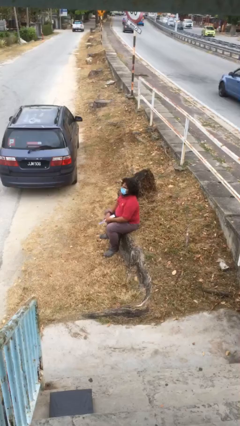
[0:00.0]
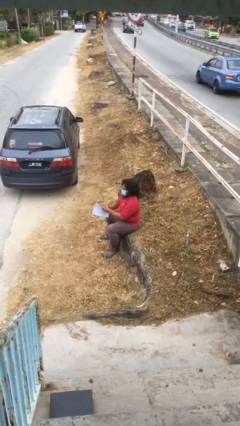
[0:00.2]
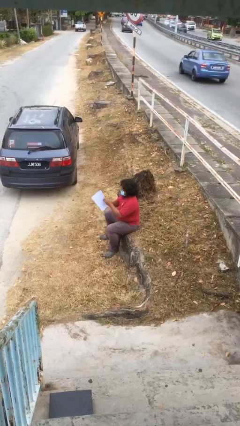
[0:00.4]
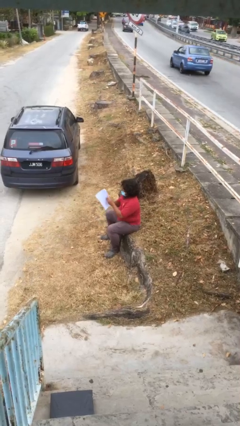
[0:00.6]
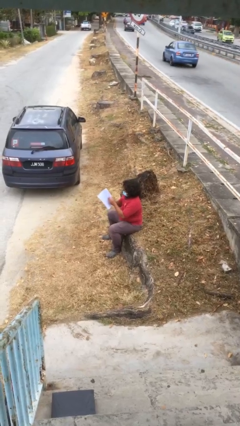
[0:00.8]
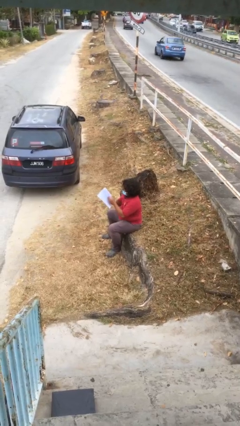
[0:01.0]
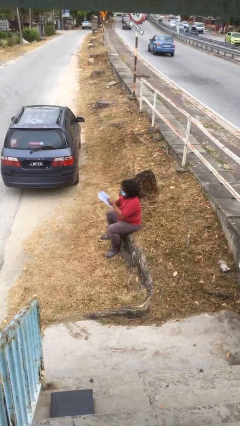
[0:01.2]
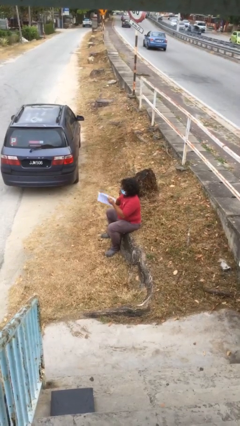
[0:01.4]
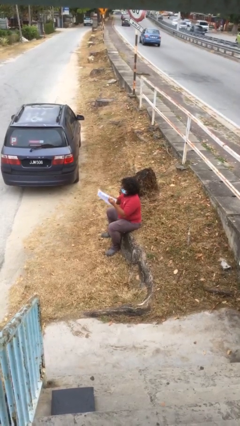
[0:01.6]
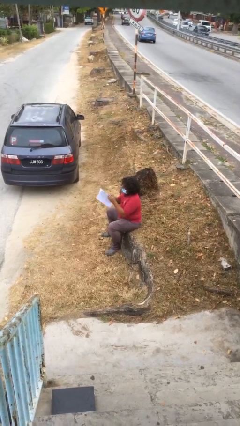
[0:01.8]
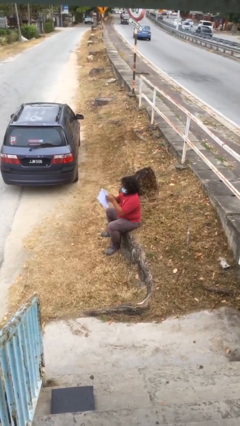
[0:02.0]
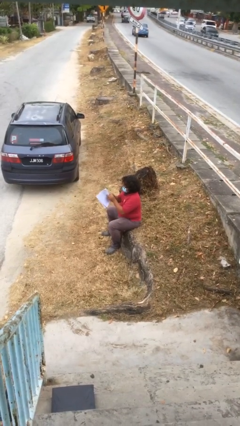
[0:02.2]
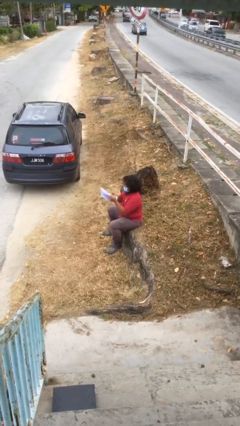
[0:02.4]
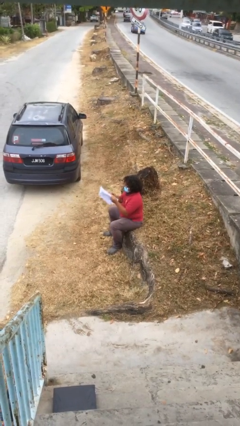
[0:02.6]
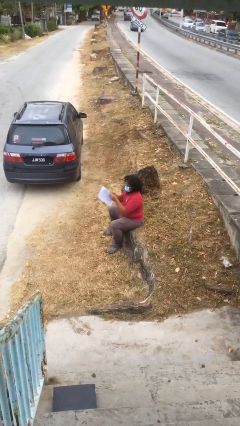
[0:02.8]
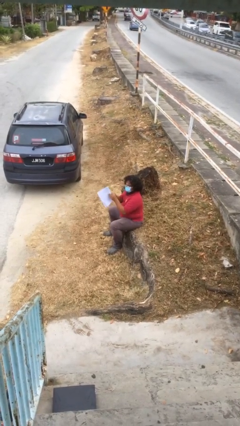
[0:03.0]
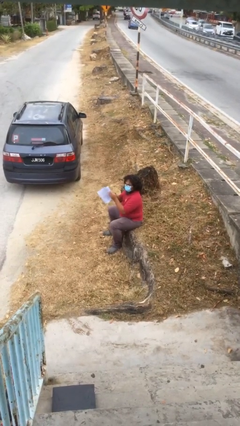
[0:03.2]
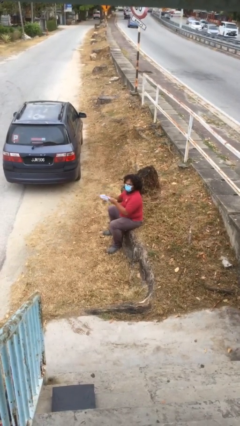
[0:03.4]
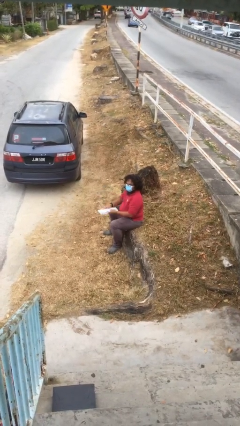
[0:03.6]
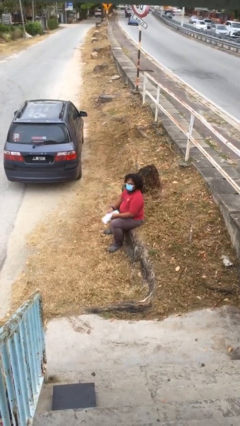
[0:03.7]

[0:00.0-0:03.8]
person reads document

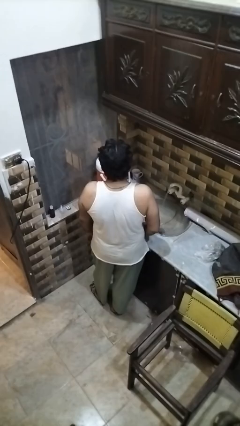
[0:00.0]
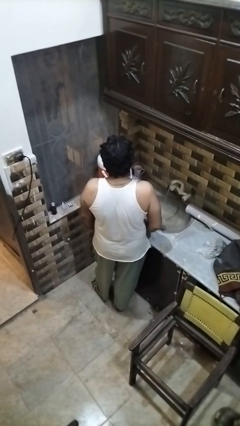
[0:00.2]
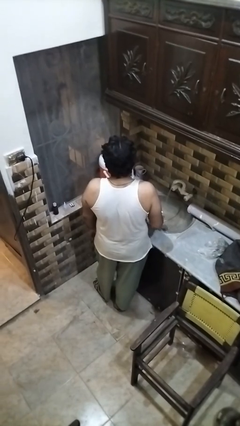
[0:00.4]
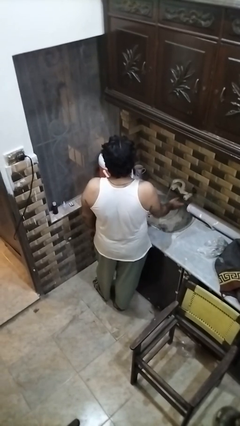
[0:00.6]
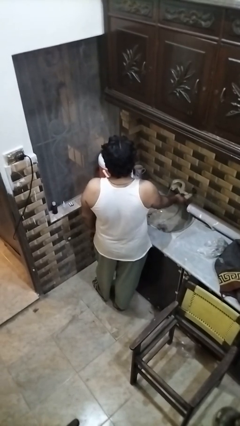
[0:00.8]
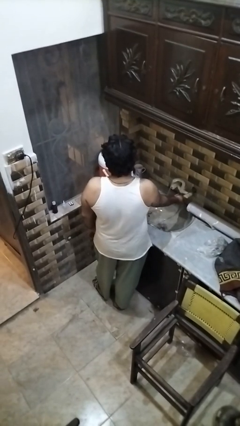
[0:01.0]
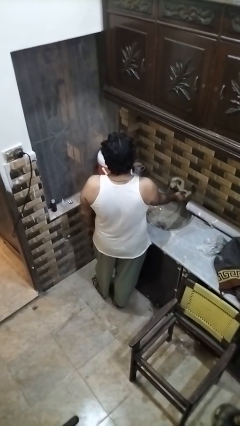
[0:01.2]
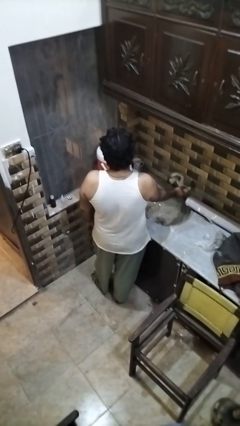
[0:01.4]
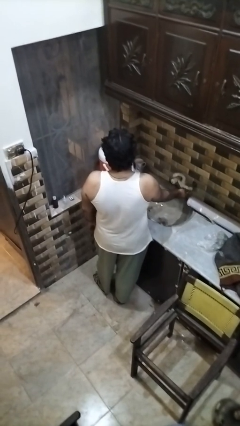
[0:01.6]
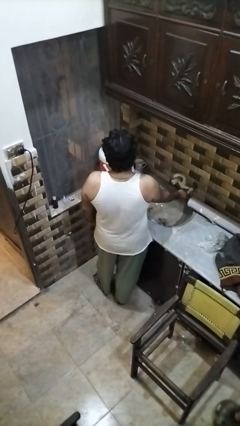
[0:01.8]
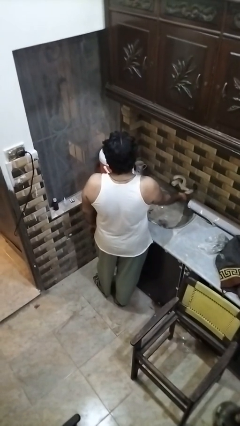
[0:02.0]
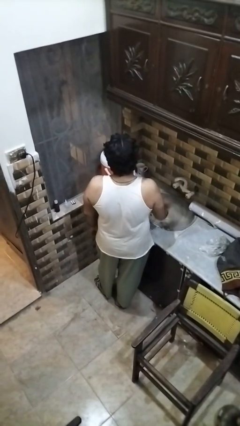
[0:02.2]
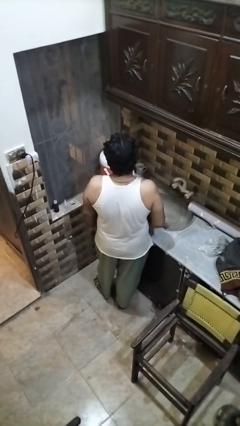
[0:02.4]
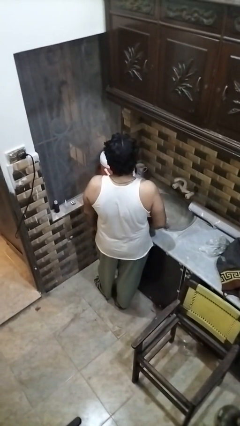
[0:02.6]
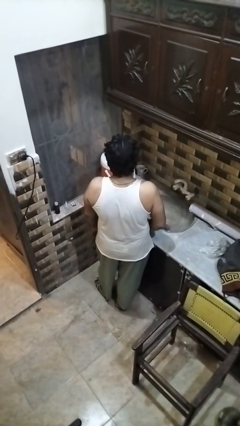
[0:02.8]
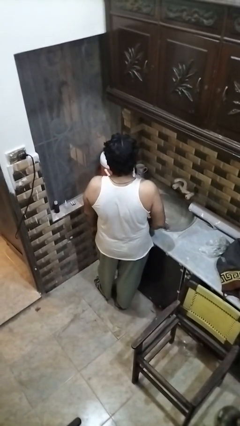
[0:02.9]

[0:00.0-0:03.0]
person turns off faucet

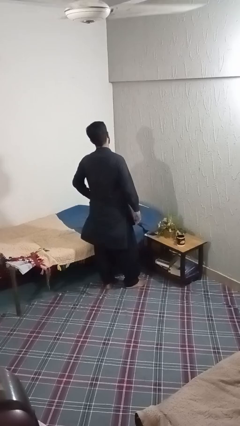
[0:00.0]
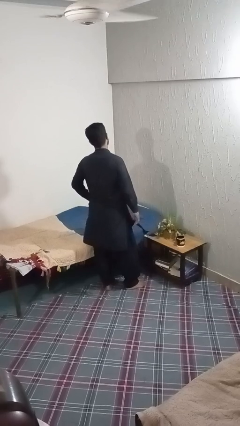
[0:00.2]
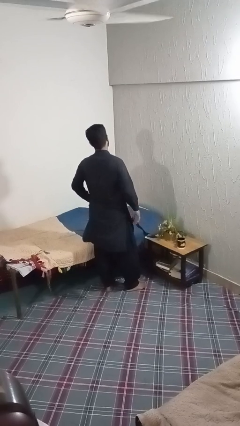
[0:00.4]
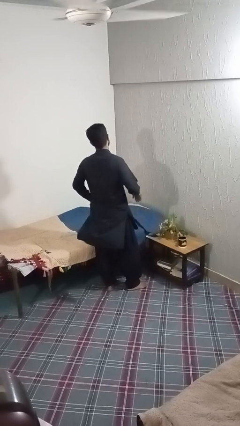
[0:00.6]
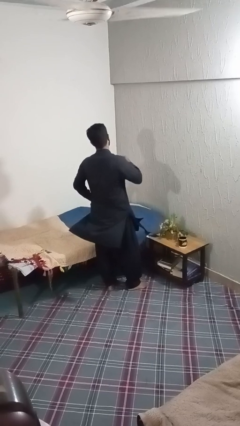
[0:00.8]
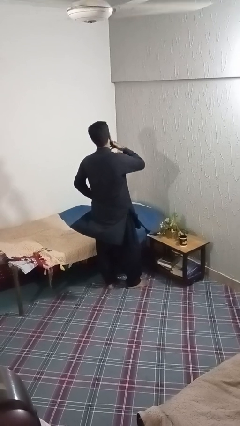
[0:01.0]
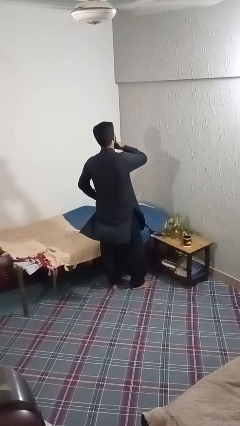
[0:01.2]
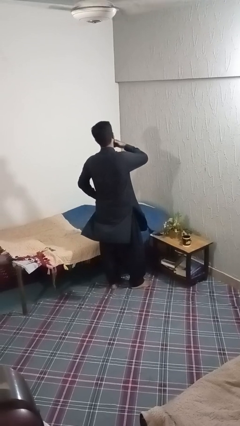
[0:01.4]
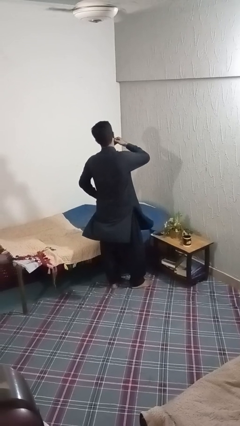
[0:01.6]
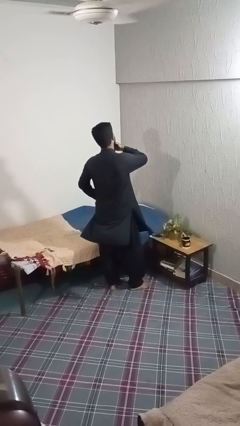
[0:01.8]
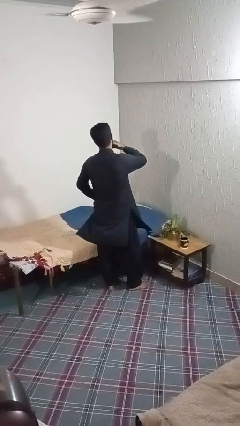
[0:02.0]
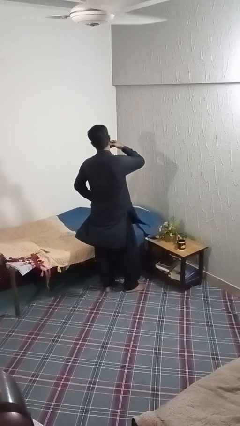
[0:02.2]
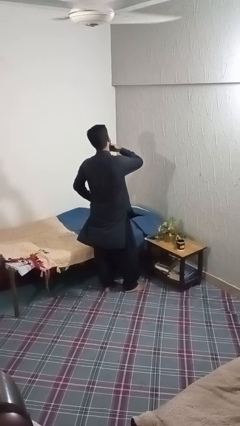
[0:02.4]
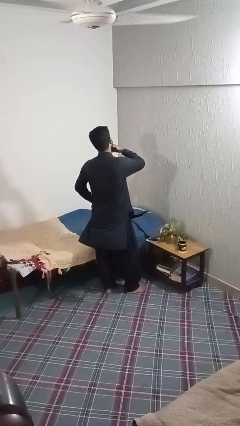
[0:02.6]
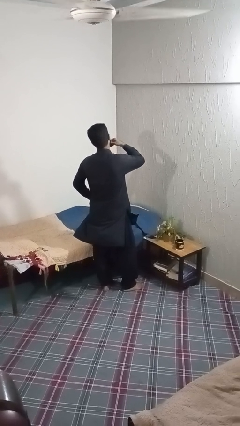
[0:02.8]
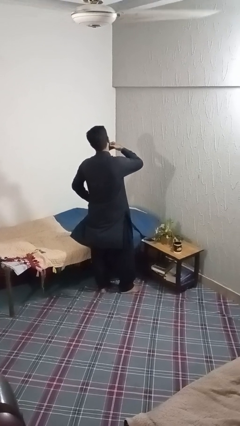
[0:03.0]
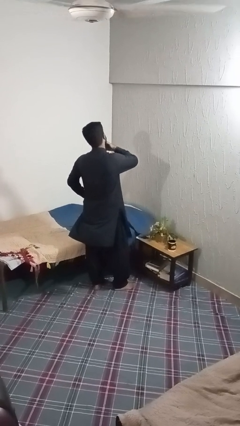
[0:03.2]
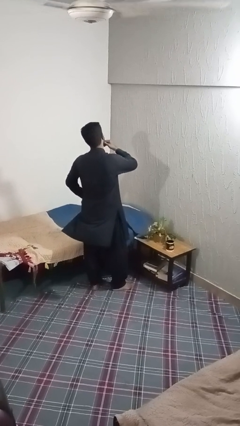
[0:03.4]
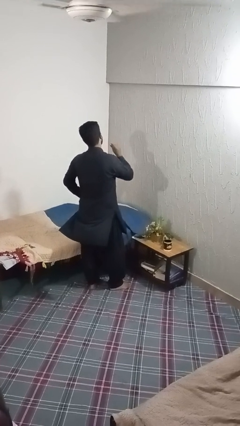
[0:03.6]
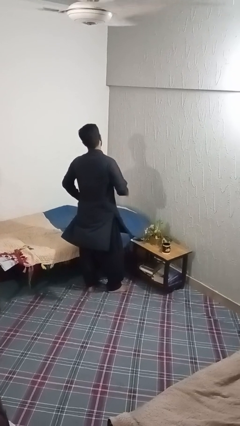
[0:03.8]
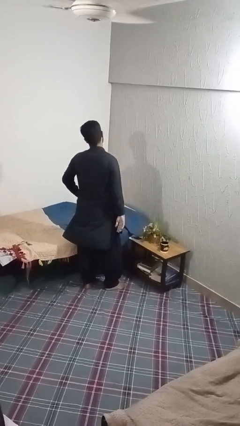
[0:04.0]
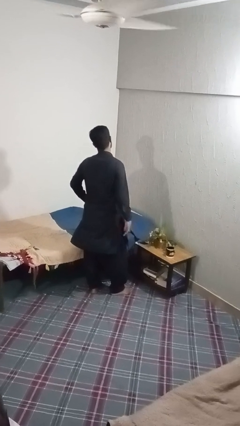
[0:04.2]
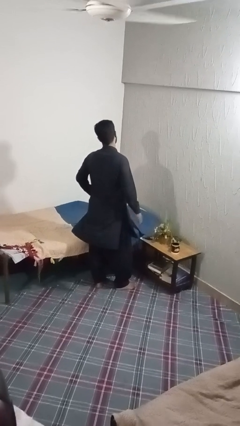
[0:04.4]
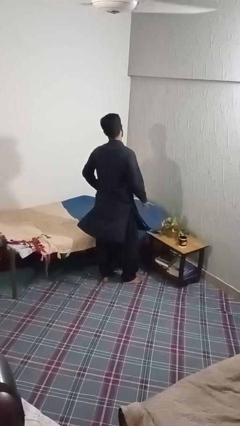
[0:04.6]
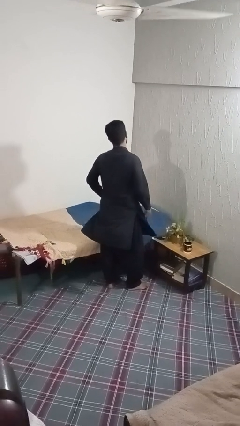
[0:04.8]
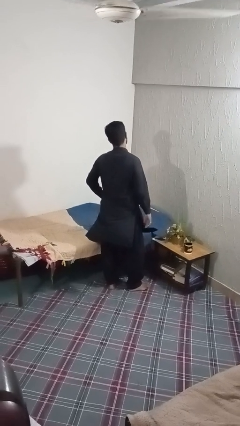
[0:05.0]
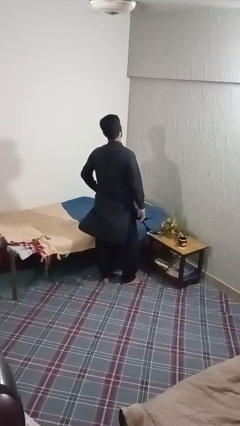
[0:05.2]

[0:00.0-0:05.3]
person strokes chin

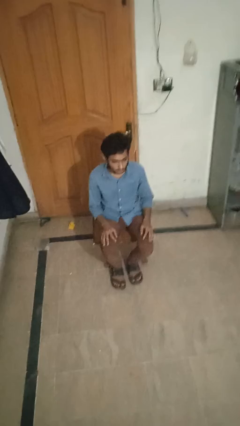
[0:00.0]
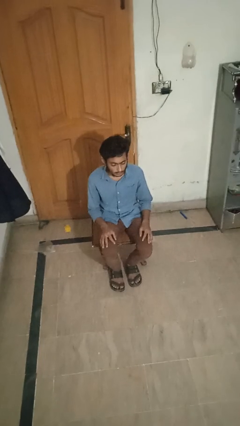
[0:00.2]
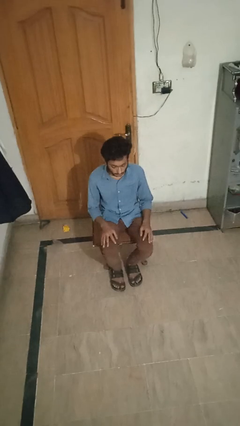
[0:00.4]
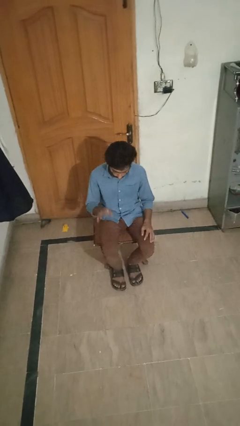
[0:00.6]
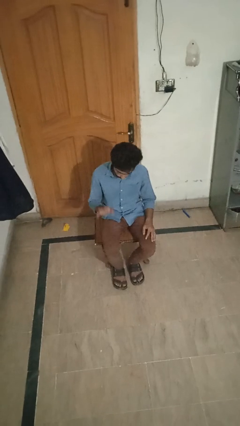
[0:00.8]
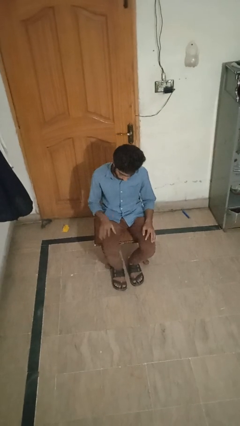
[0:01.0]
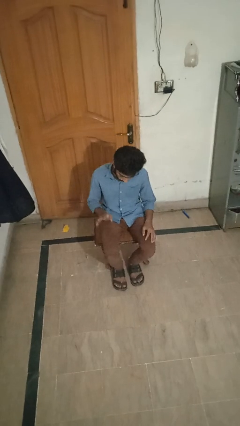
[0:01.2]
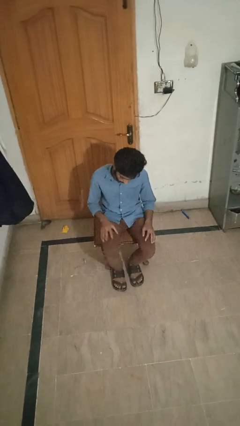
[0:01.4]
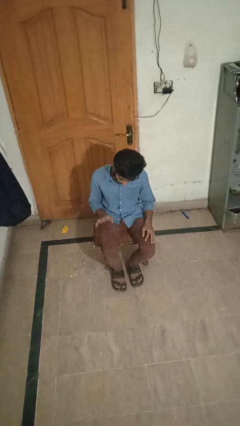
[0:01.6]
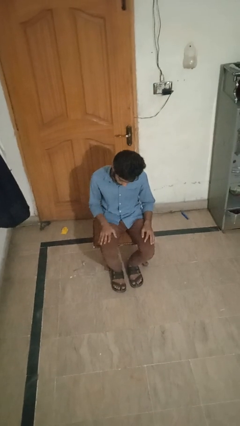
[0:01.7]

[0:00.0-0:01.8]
person slaps hands on thighs

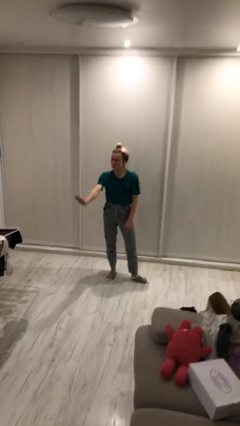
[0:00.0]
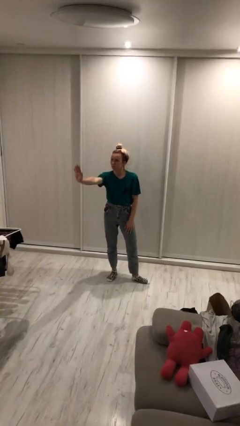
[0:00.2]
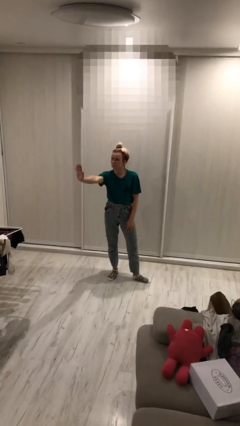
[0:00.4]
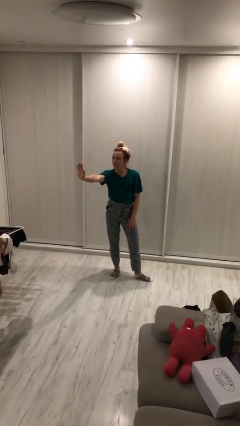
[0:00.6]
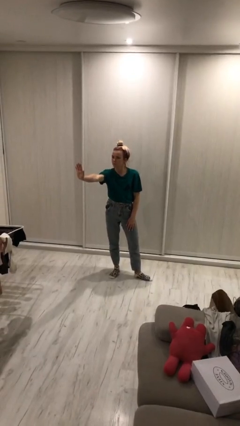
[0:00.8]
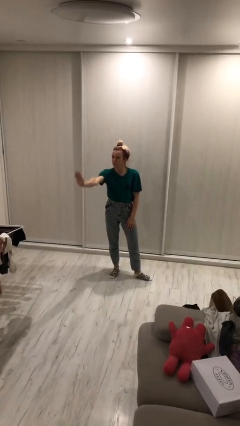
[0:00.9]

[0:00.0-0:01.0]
person gestures stop

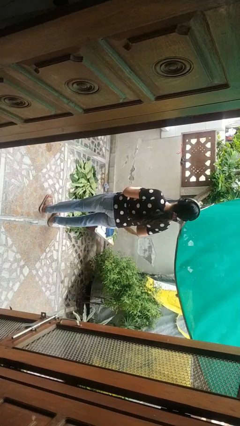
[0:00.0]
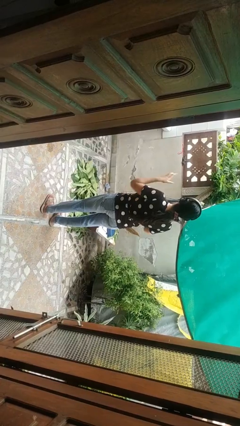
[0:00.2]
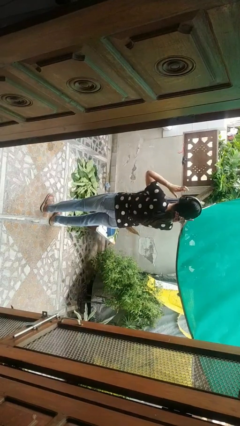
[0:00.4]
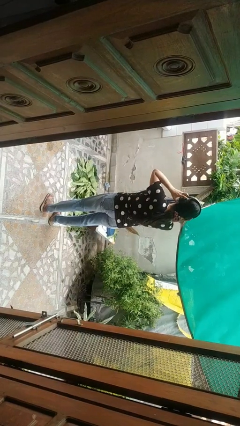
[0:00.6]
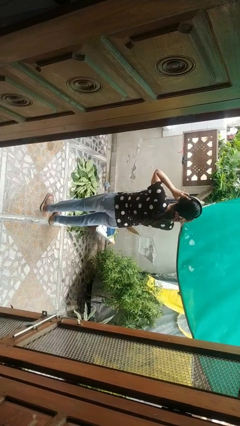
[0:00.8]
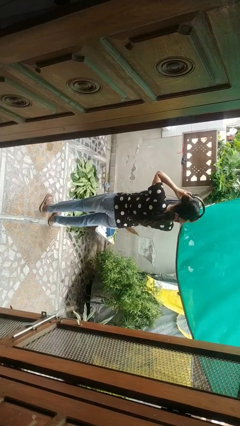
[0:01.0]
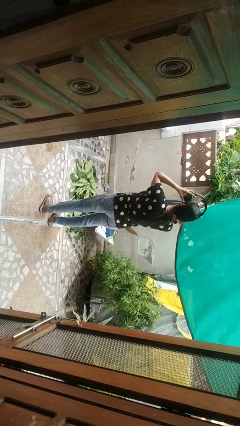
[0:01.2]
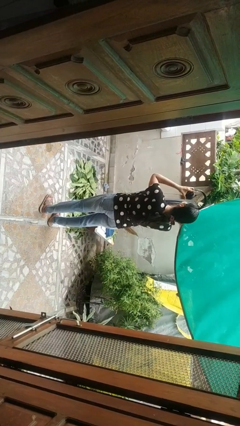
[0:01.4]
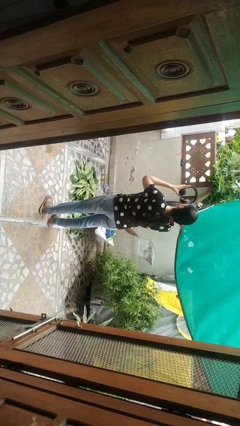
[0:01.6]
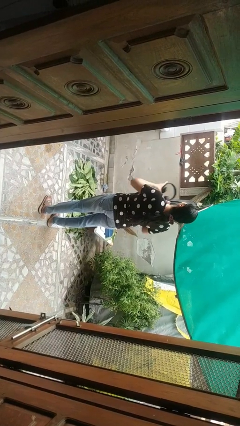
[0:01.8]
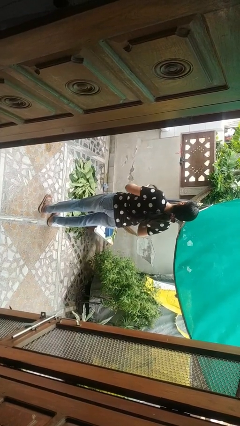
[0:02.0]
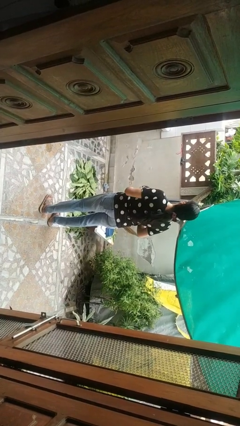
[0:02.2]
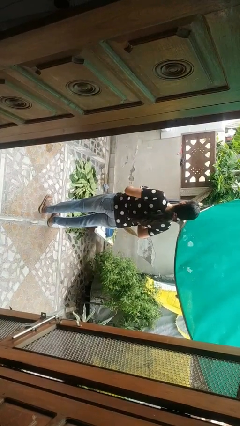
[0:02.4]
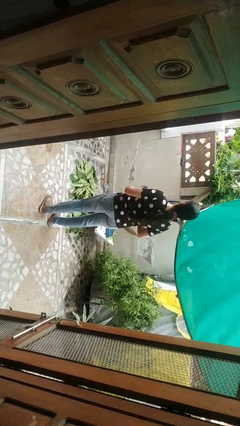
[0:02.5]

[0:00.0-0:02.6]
person takes off headphones

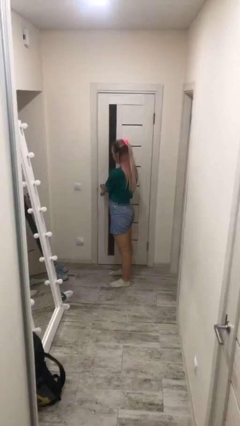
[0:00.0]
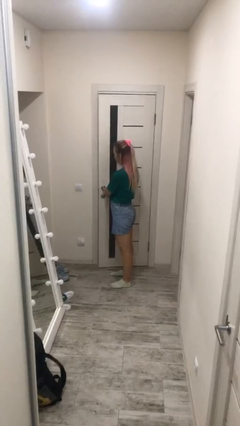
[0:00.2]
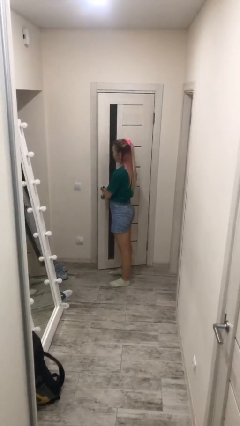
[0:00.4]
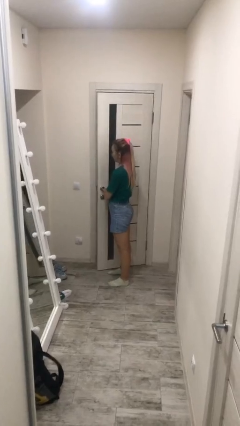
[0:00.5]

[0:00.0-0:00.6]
person opens facility door
